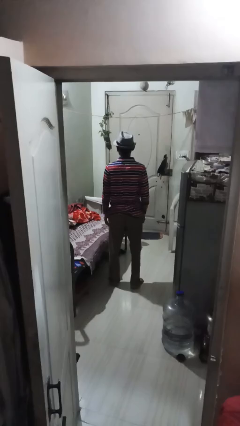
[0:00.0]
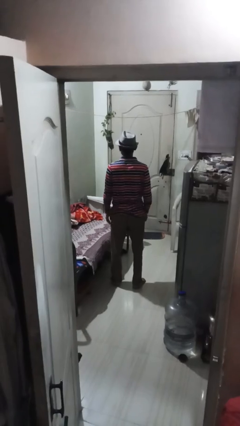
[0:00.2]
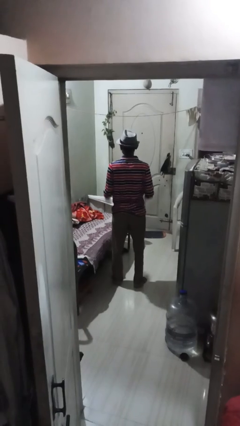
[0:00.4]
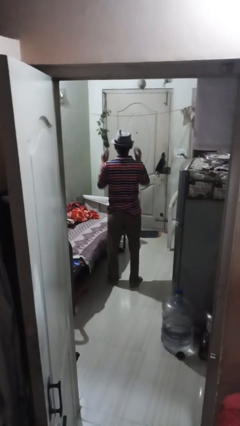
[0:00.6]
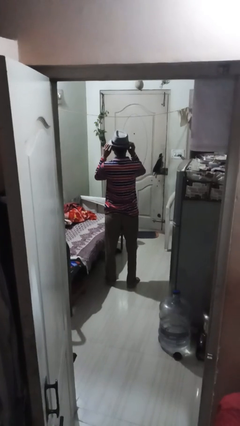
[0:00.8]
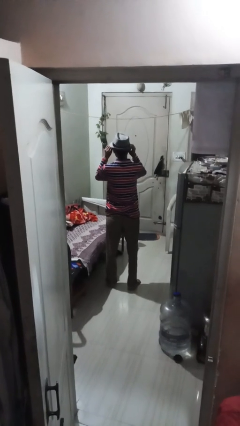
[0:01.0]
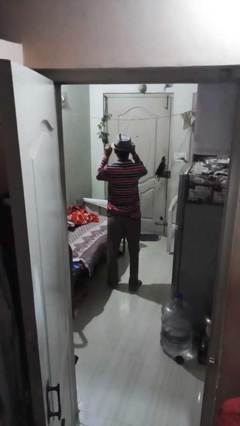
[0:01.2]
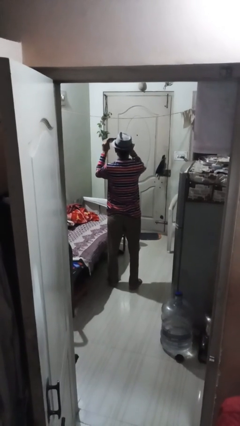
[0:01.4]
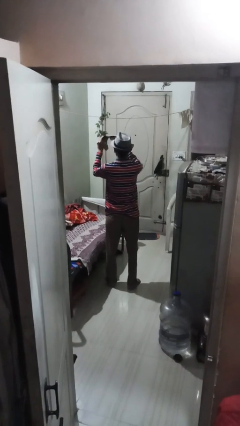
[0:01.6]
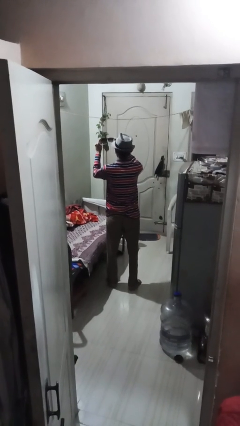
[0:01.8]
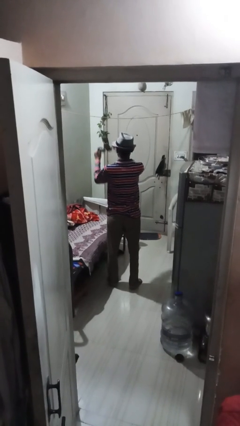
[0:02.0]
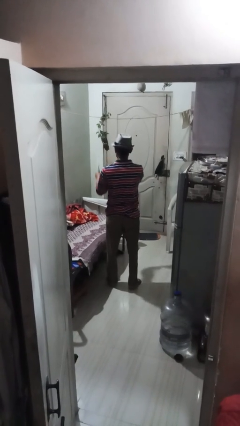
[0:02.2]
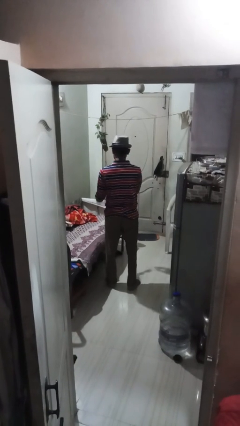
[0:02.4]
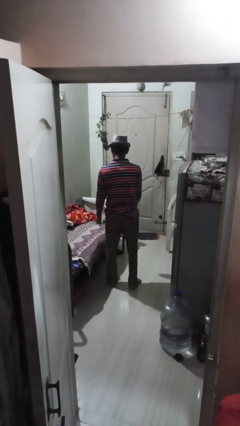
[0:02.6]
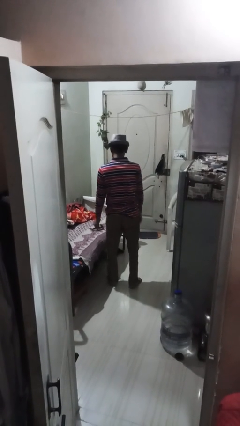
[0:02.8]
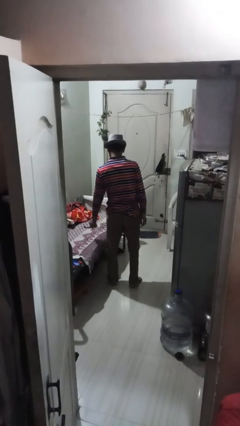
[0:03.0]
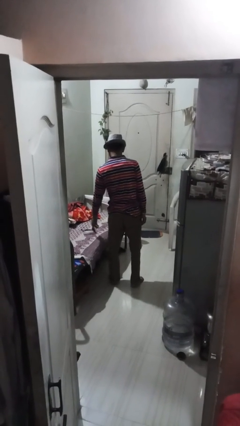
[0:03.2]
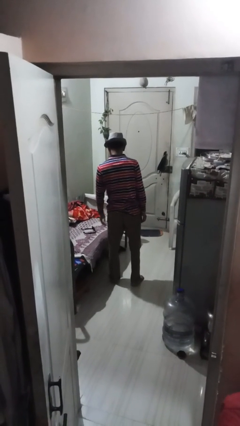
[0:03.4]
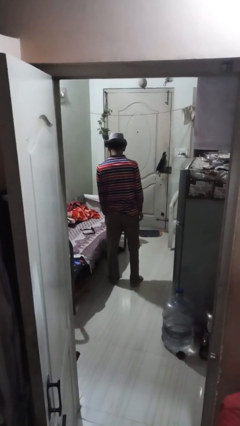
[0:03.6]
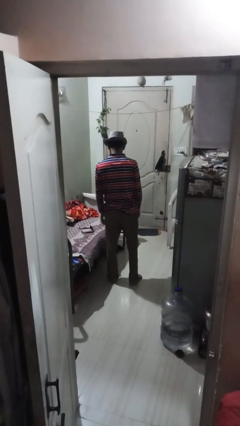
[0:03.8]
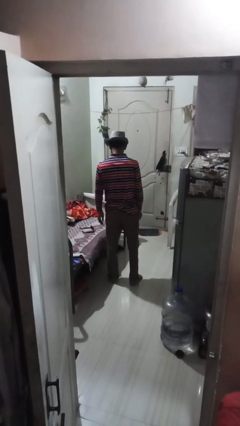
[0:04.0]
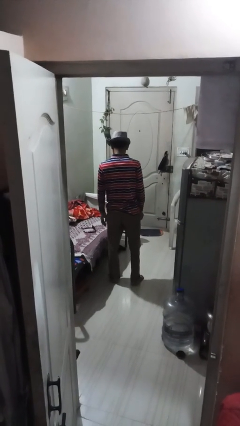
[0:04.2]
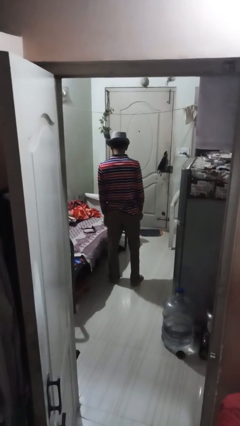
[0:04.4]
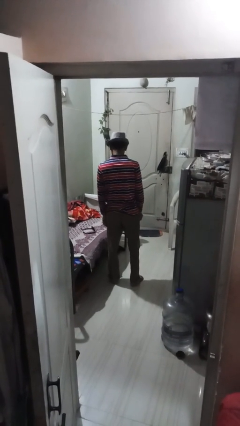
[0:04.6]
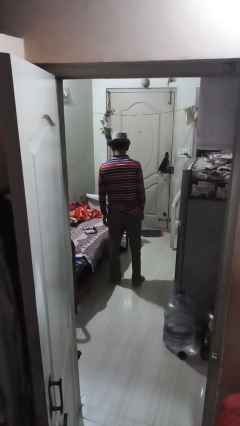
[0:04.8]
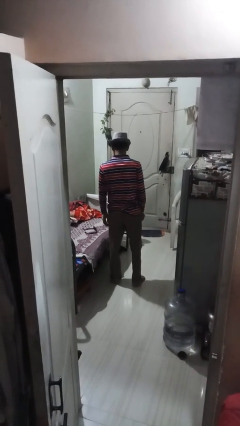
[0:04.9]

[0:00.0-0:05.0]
person takes off sunglasses

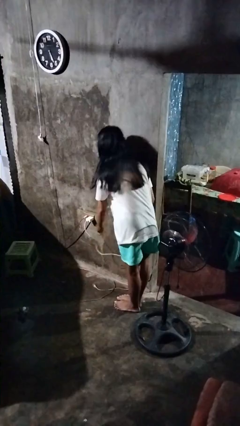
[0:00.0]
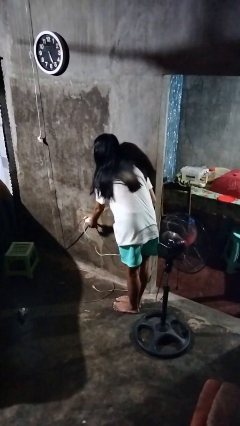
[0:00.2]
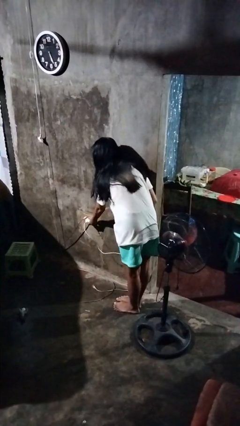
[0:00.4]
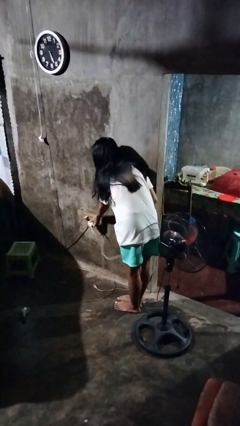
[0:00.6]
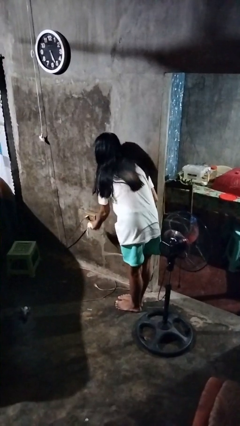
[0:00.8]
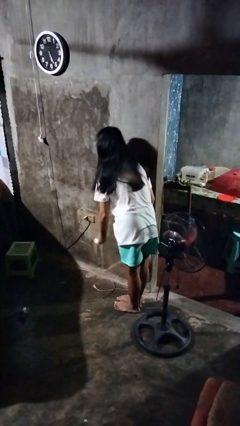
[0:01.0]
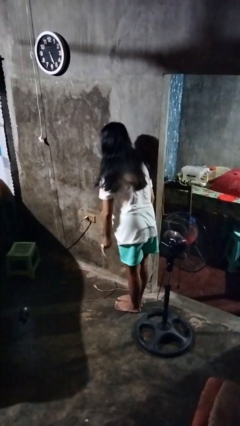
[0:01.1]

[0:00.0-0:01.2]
person unplugs from electrical socket

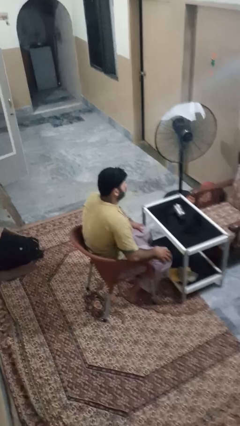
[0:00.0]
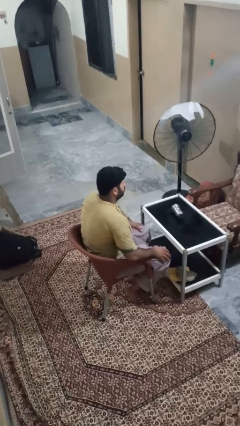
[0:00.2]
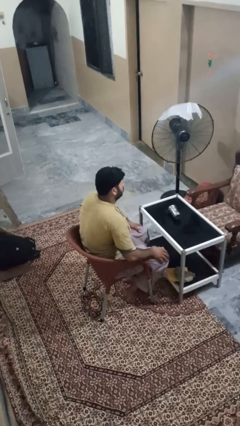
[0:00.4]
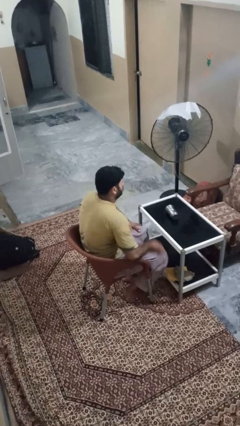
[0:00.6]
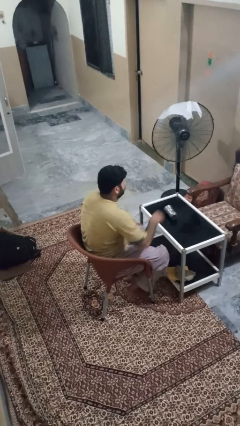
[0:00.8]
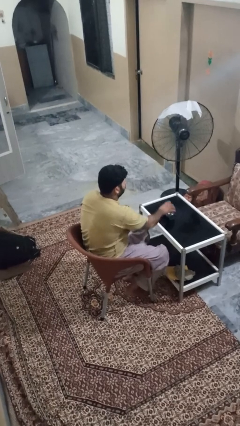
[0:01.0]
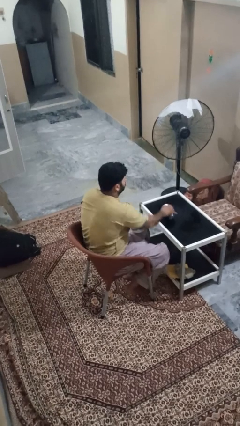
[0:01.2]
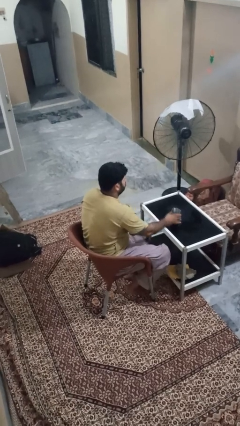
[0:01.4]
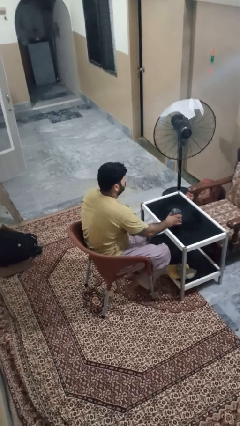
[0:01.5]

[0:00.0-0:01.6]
person sets upright glass

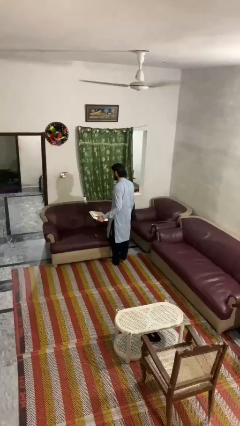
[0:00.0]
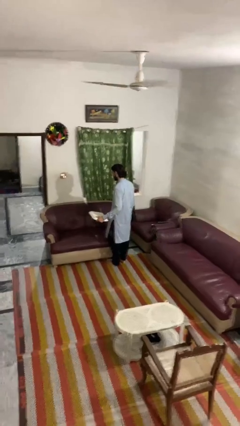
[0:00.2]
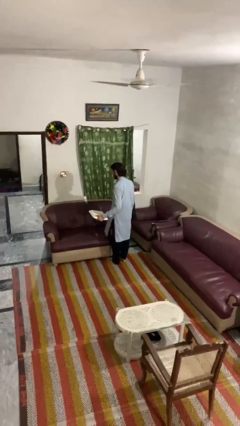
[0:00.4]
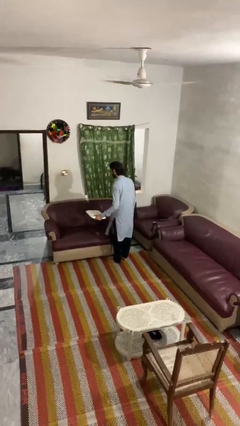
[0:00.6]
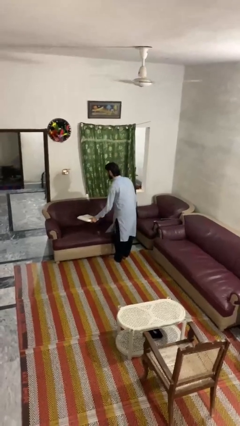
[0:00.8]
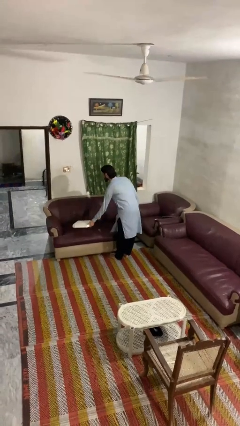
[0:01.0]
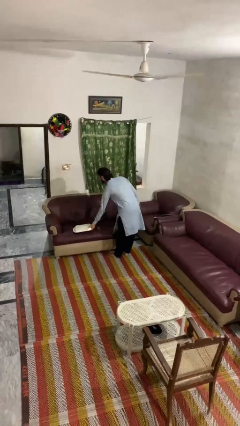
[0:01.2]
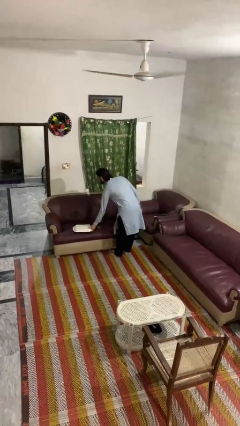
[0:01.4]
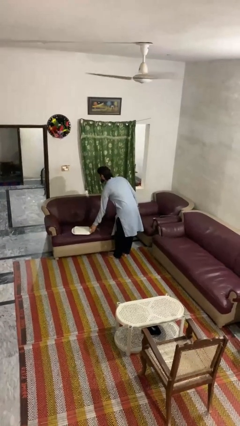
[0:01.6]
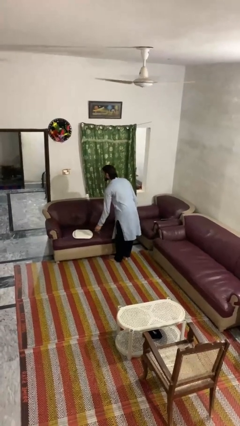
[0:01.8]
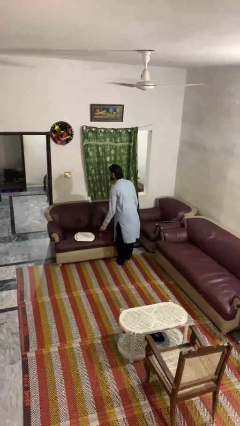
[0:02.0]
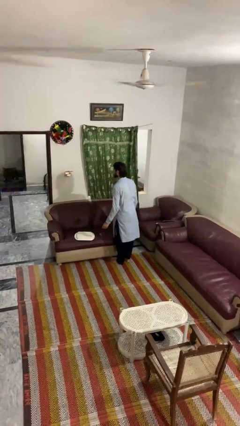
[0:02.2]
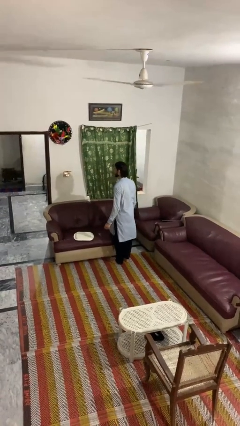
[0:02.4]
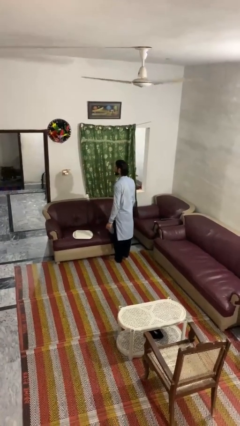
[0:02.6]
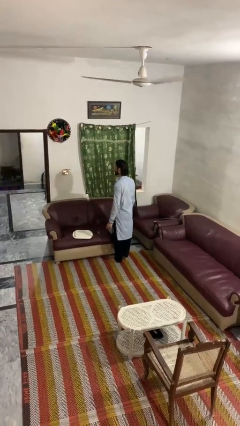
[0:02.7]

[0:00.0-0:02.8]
person puts down object on couch

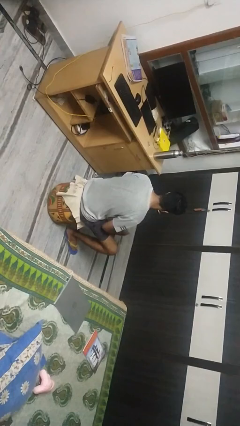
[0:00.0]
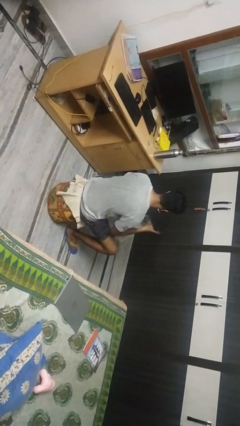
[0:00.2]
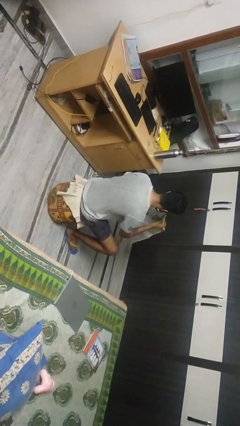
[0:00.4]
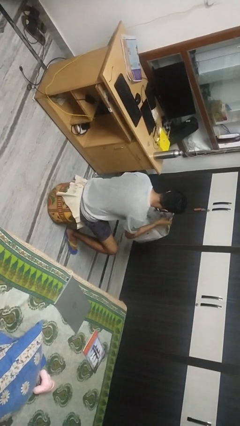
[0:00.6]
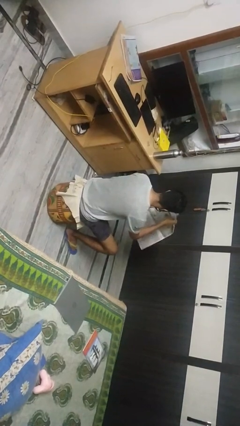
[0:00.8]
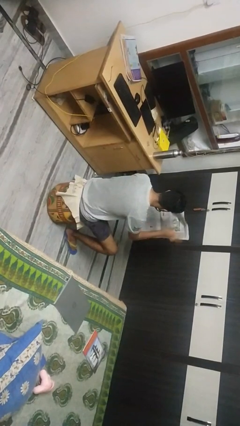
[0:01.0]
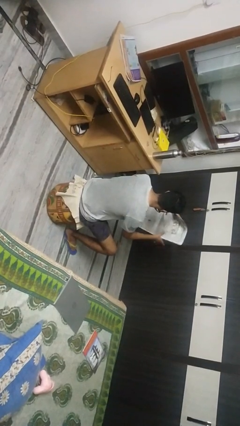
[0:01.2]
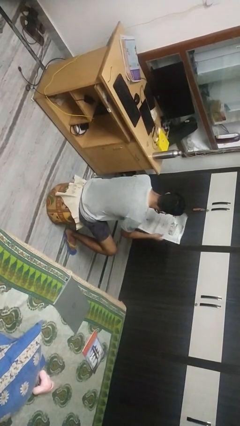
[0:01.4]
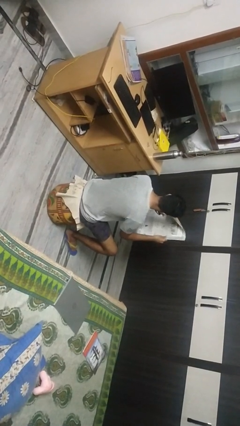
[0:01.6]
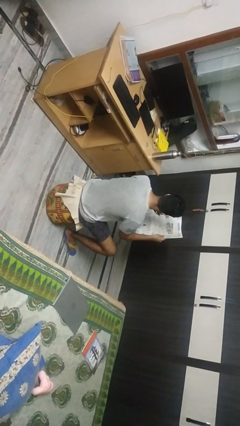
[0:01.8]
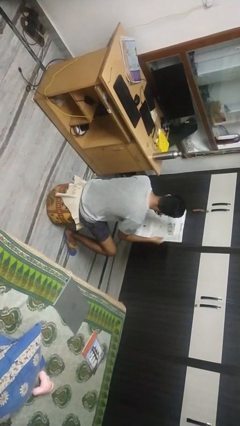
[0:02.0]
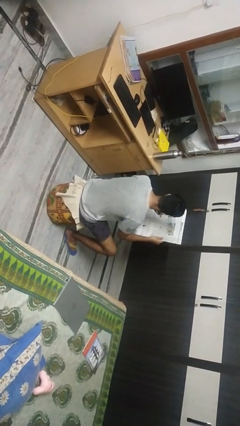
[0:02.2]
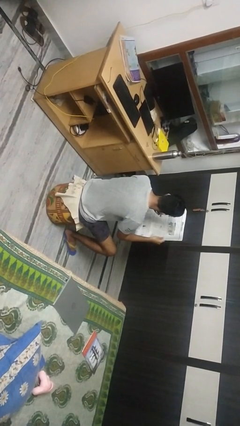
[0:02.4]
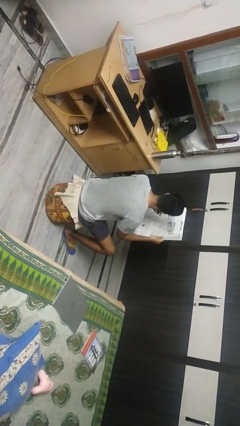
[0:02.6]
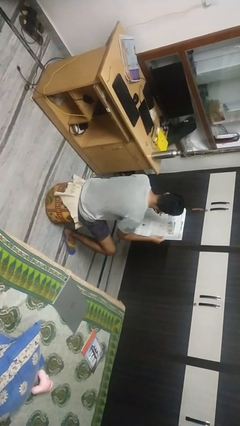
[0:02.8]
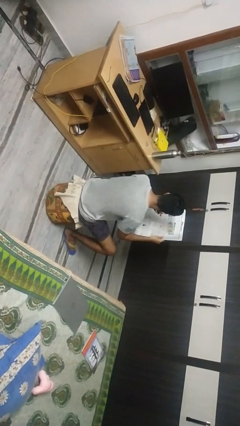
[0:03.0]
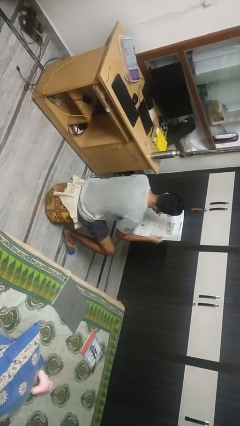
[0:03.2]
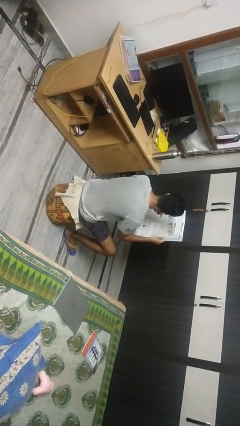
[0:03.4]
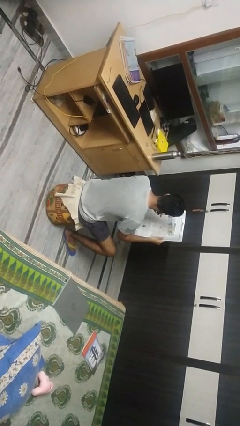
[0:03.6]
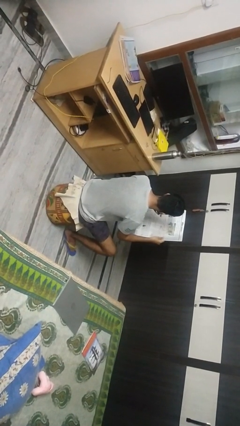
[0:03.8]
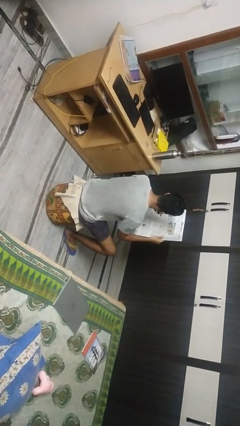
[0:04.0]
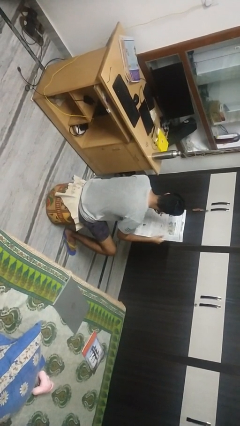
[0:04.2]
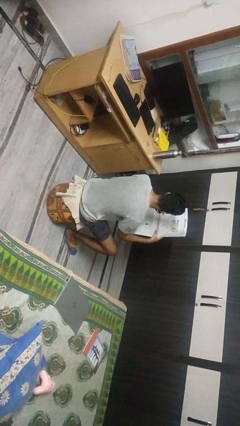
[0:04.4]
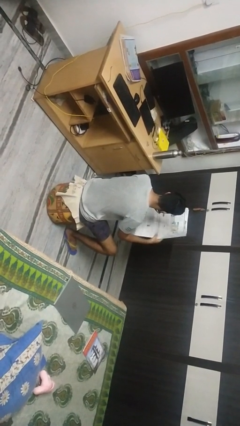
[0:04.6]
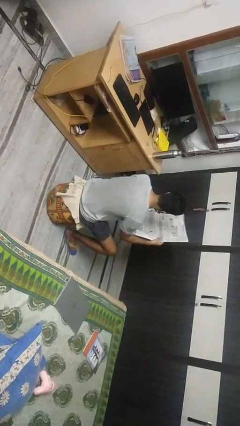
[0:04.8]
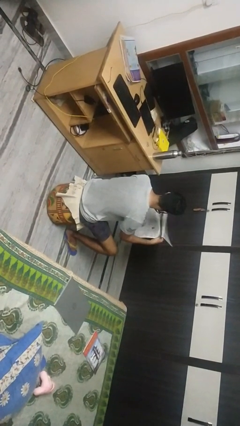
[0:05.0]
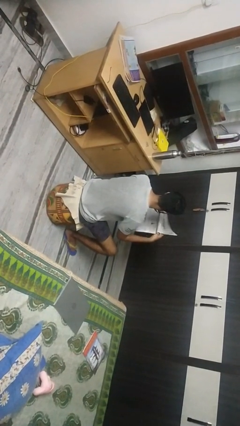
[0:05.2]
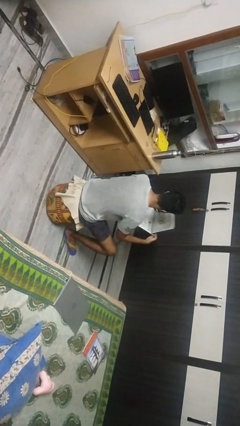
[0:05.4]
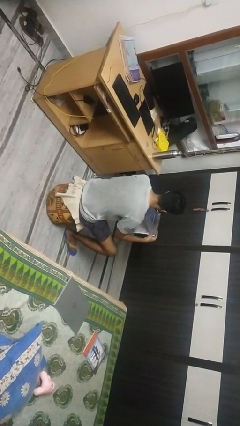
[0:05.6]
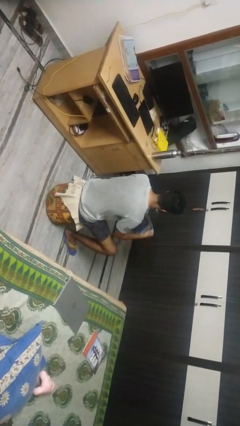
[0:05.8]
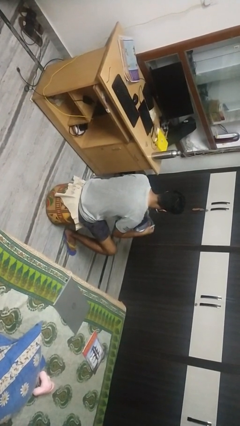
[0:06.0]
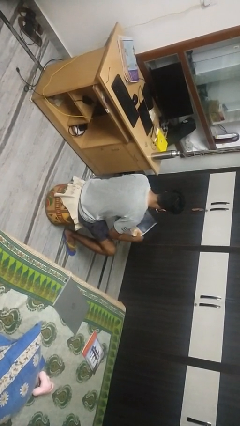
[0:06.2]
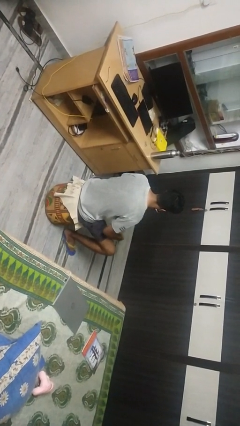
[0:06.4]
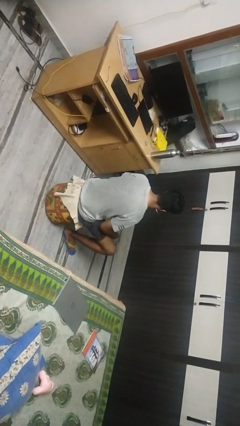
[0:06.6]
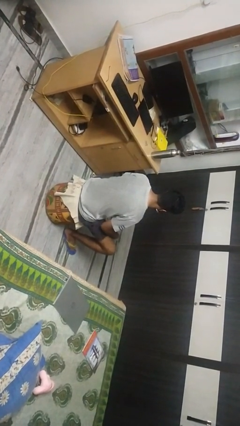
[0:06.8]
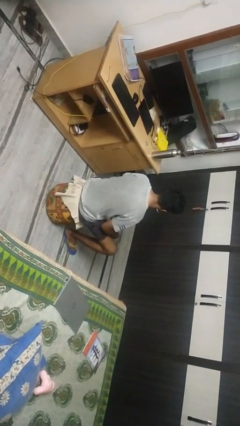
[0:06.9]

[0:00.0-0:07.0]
person reads newspaper
